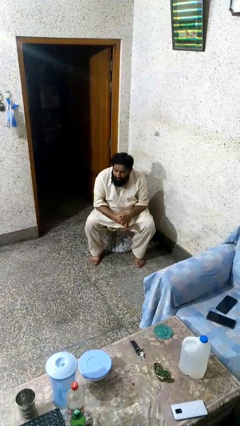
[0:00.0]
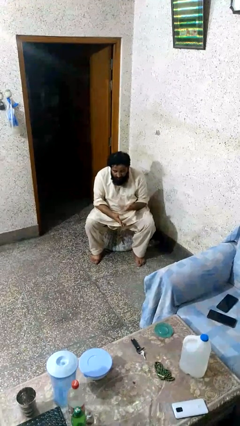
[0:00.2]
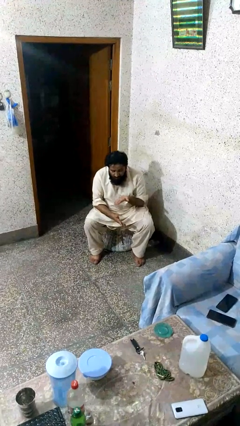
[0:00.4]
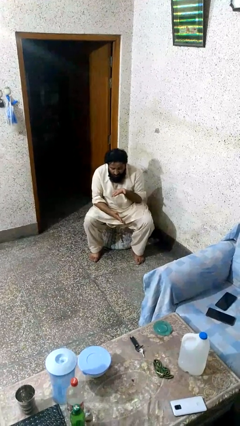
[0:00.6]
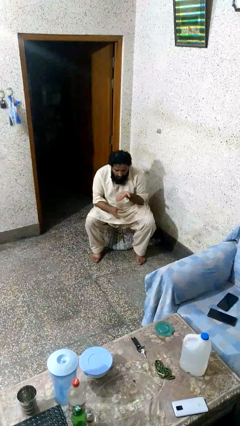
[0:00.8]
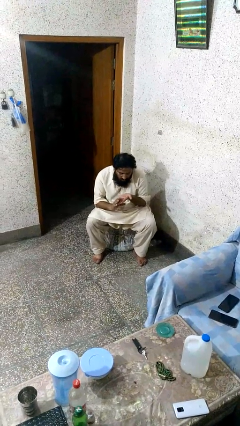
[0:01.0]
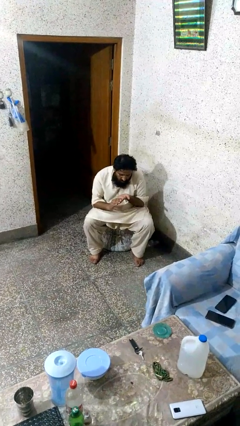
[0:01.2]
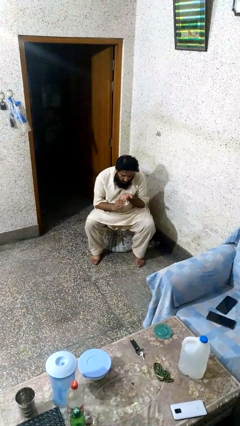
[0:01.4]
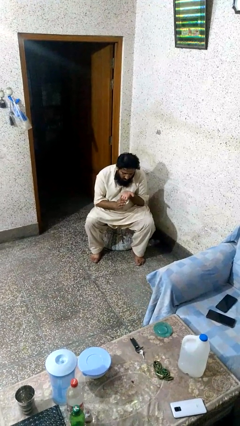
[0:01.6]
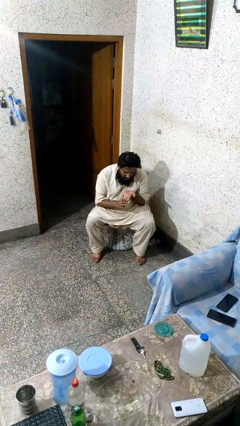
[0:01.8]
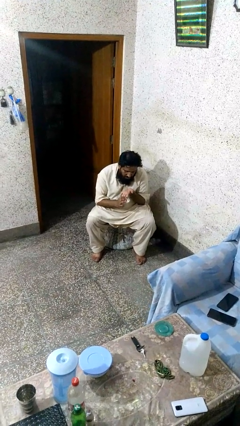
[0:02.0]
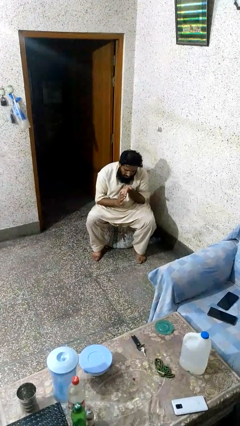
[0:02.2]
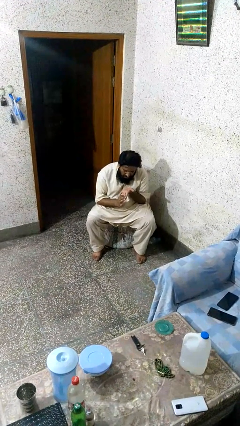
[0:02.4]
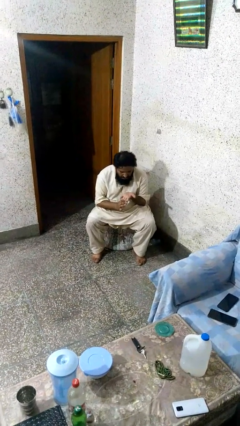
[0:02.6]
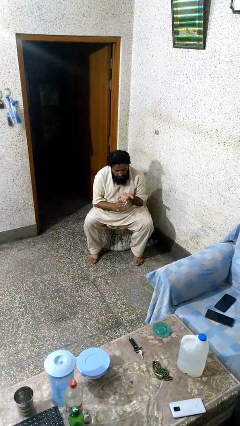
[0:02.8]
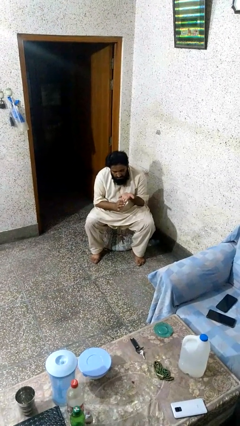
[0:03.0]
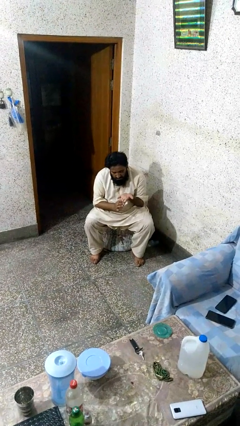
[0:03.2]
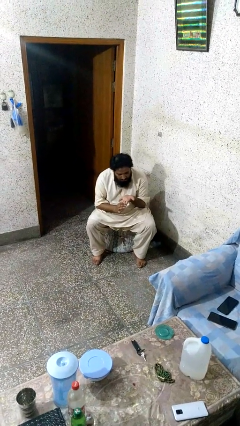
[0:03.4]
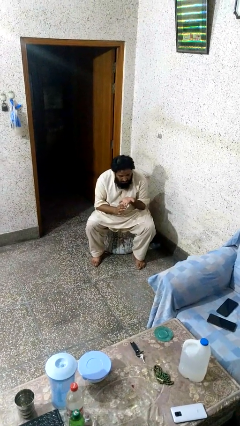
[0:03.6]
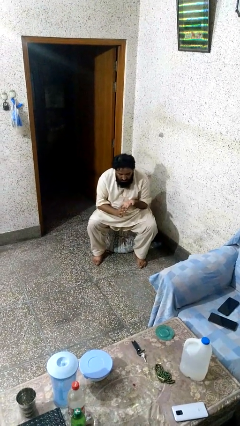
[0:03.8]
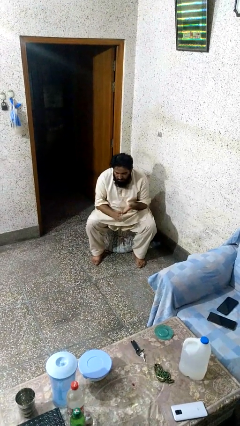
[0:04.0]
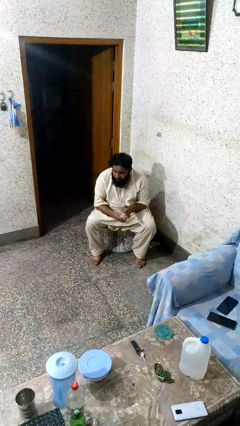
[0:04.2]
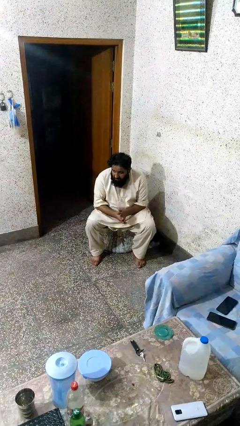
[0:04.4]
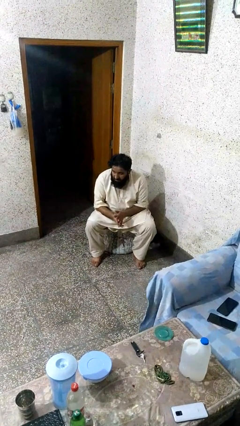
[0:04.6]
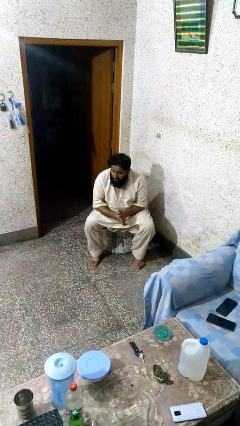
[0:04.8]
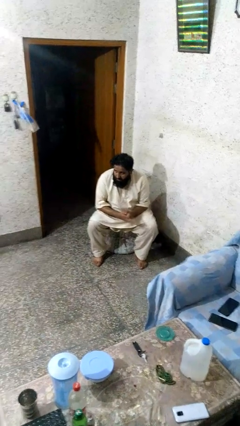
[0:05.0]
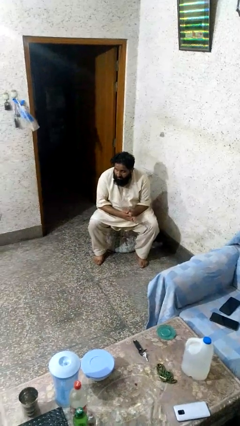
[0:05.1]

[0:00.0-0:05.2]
person looks at hands in lap

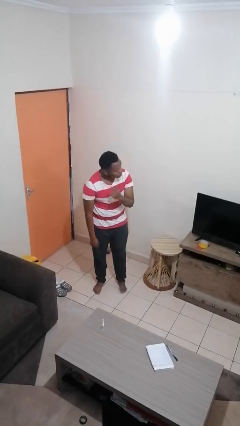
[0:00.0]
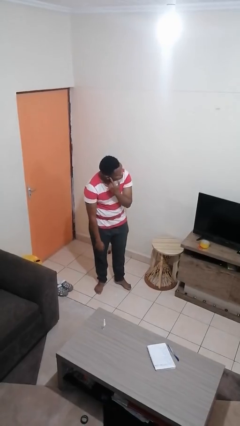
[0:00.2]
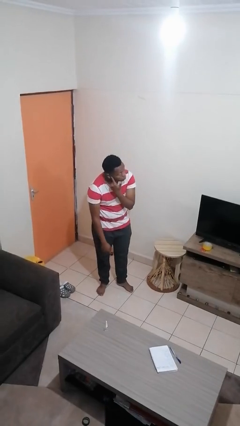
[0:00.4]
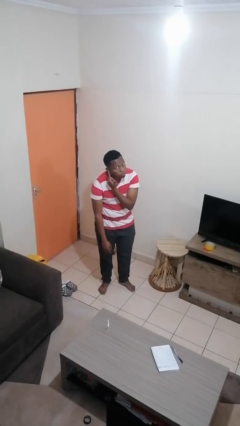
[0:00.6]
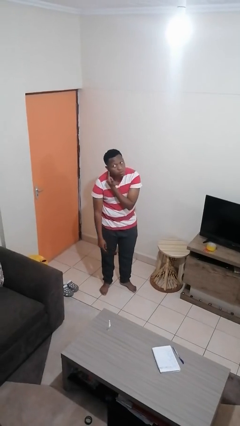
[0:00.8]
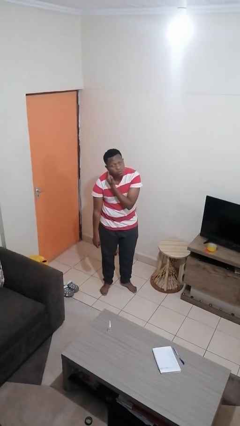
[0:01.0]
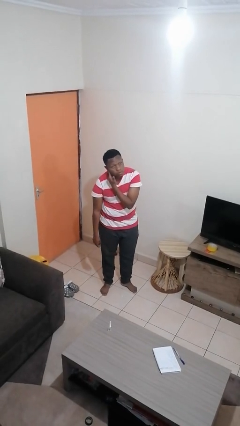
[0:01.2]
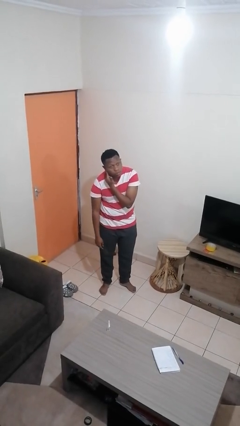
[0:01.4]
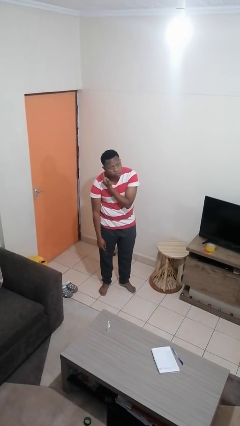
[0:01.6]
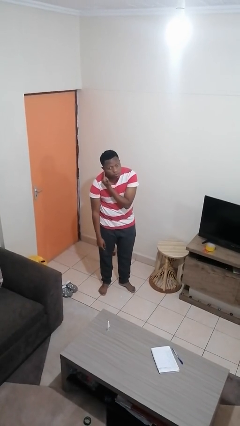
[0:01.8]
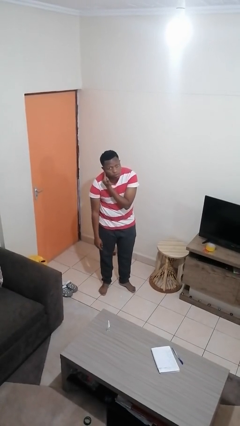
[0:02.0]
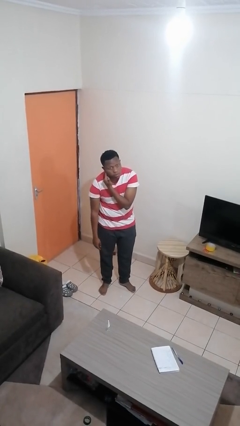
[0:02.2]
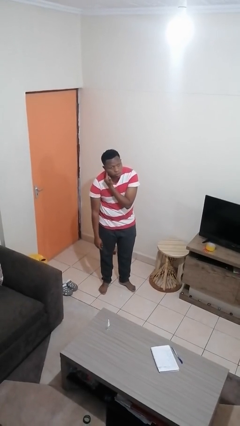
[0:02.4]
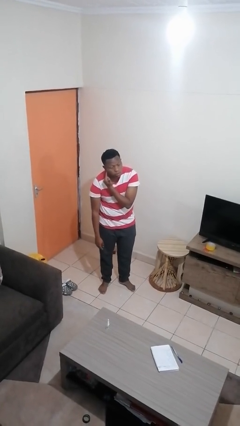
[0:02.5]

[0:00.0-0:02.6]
person gestures listen closely

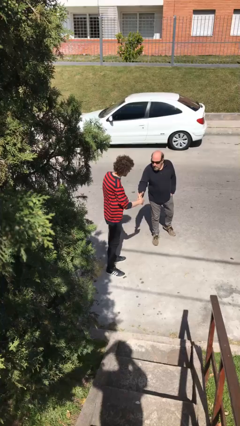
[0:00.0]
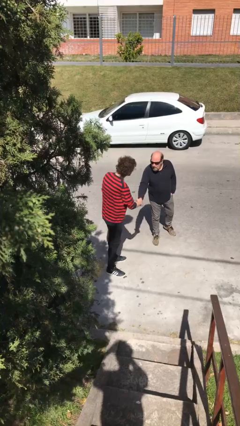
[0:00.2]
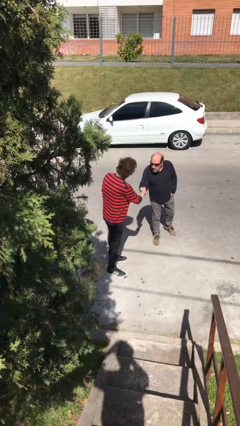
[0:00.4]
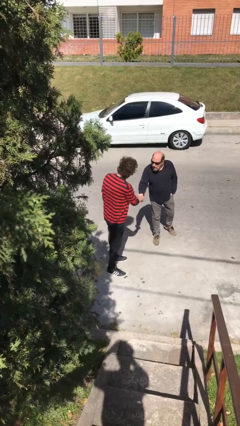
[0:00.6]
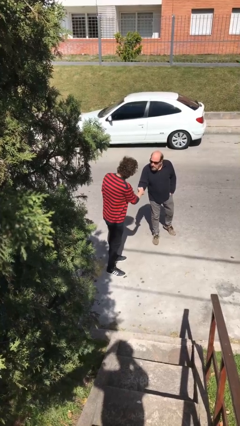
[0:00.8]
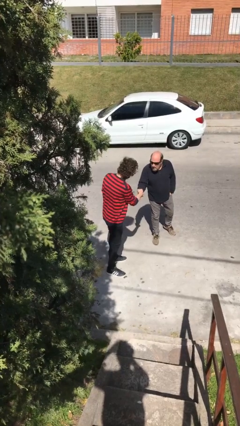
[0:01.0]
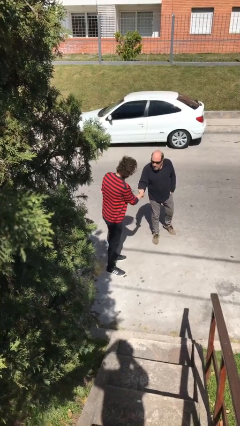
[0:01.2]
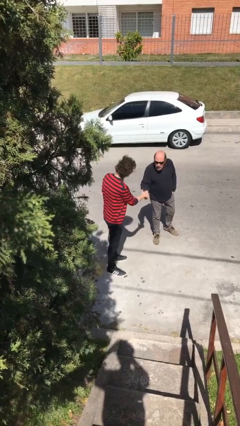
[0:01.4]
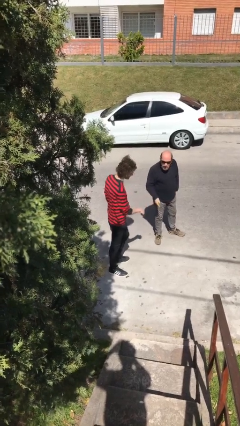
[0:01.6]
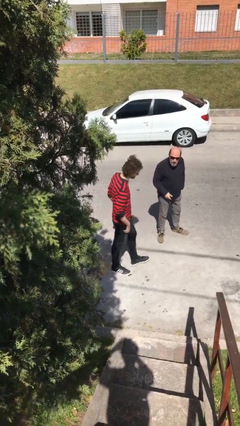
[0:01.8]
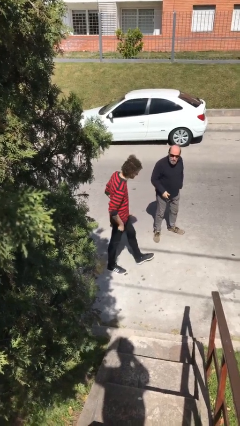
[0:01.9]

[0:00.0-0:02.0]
person shakes hand

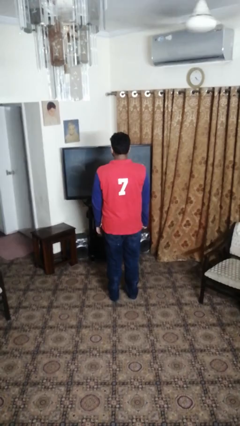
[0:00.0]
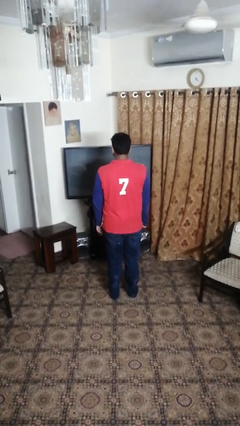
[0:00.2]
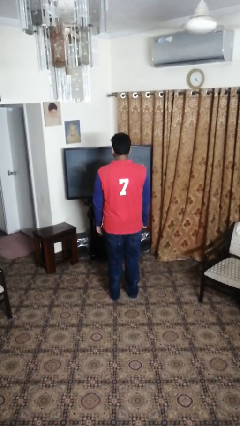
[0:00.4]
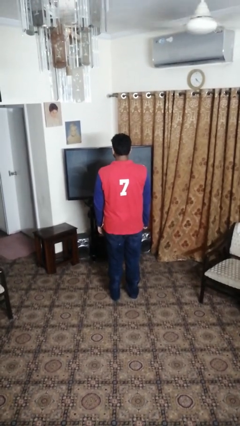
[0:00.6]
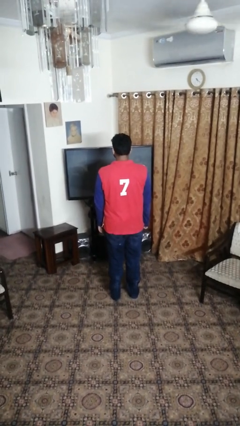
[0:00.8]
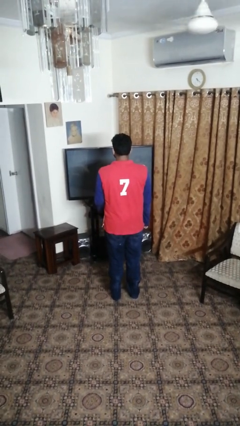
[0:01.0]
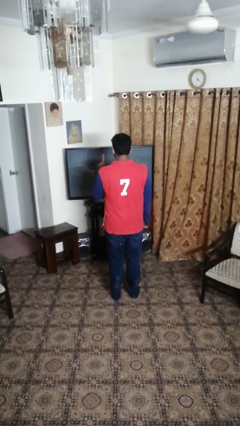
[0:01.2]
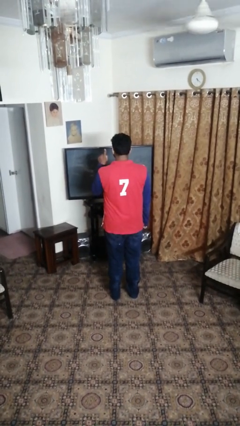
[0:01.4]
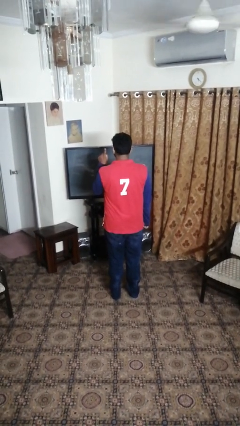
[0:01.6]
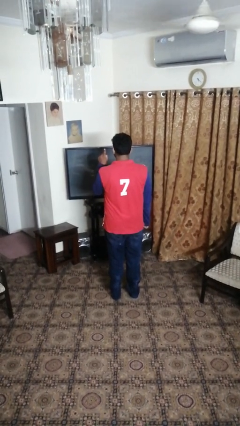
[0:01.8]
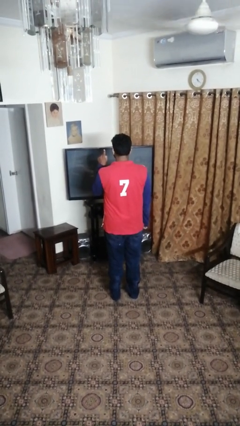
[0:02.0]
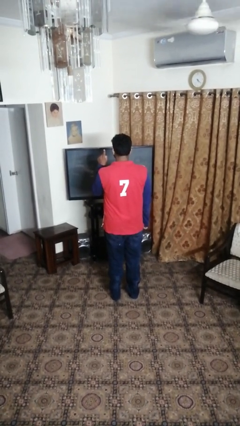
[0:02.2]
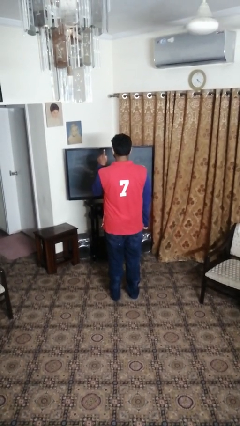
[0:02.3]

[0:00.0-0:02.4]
person gestures number one

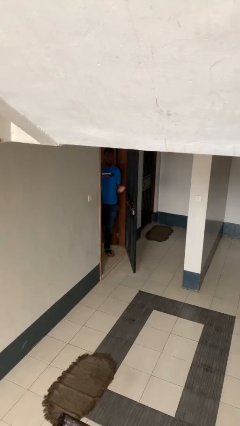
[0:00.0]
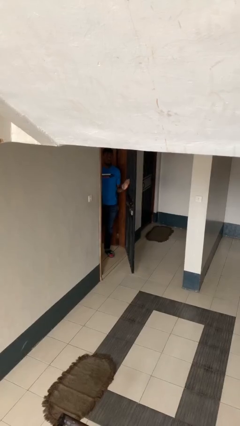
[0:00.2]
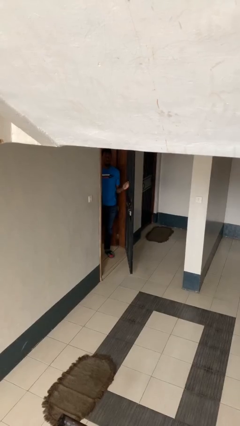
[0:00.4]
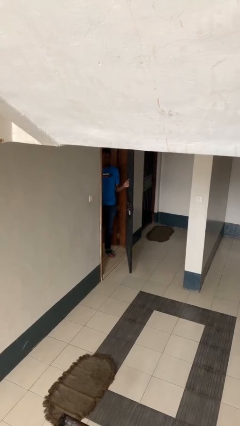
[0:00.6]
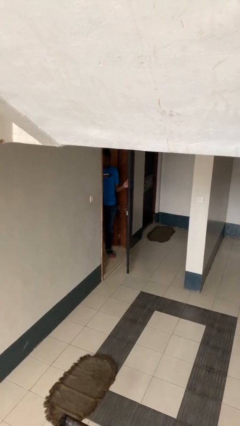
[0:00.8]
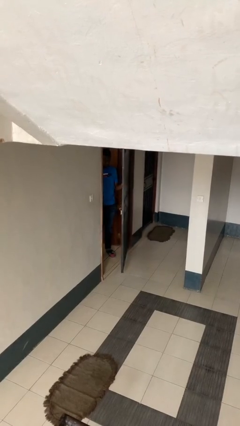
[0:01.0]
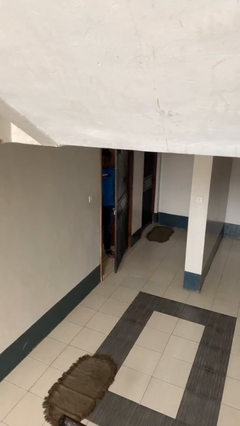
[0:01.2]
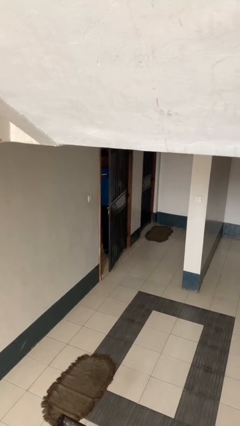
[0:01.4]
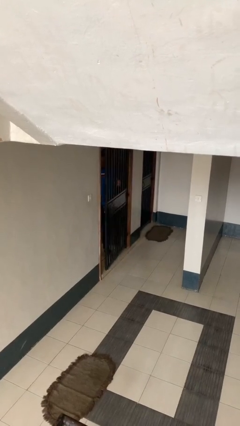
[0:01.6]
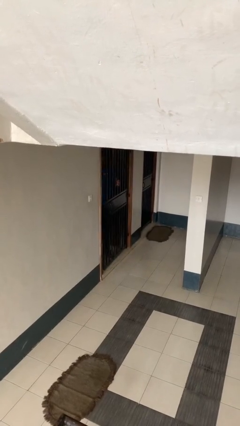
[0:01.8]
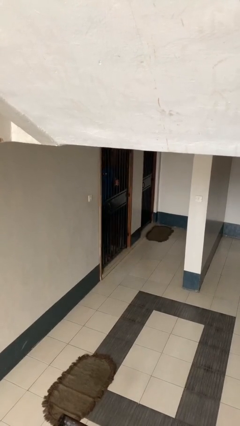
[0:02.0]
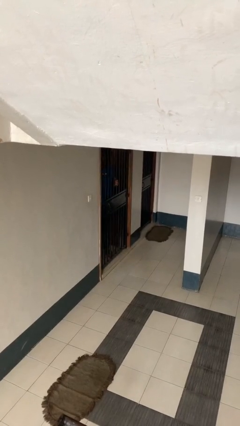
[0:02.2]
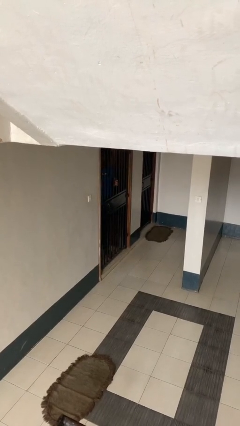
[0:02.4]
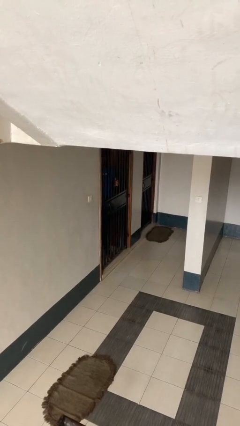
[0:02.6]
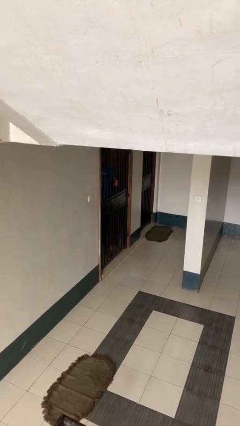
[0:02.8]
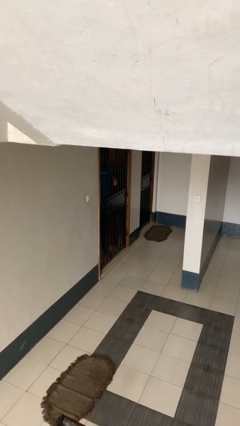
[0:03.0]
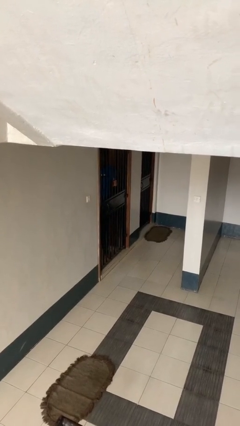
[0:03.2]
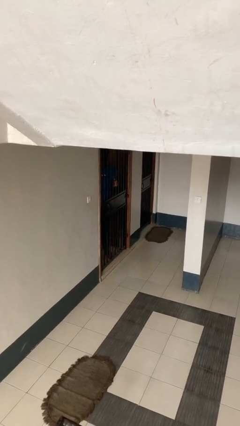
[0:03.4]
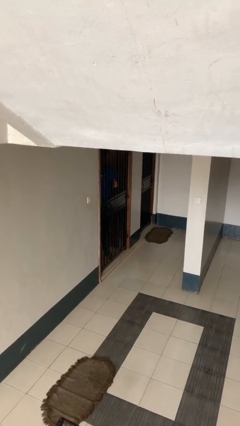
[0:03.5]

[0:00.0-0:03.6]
person closes facility door

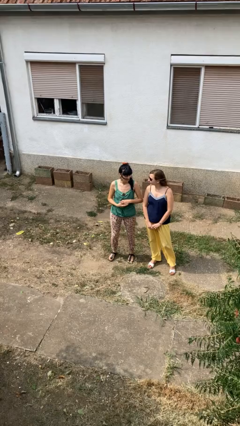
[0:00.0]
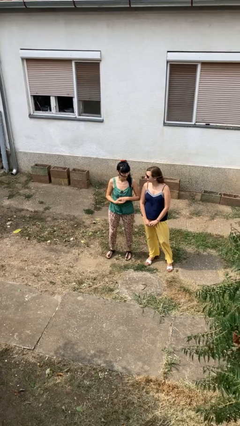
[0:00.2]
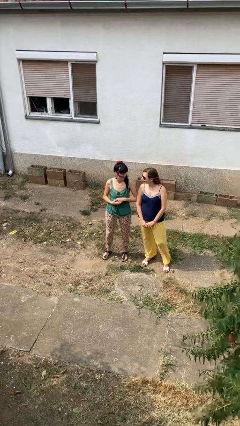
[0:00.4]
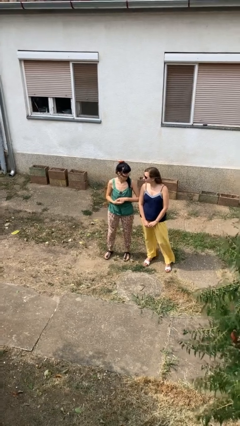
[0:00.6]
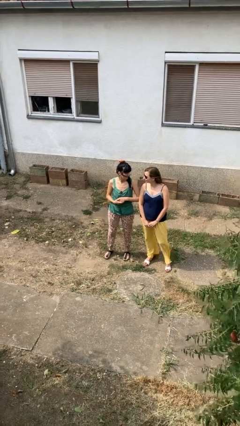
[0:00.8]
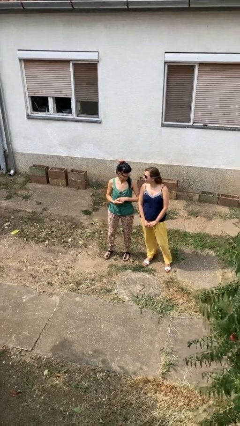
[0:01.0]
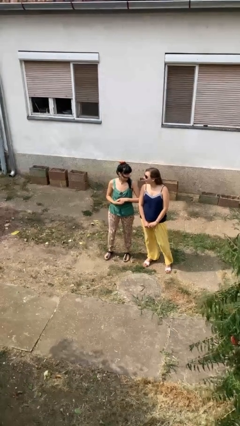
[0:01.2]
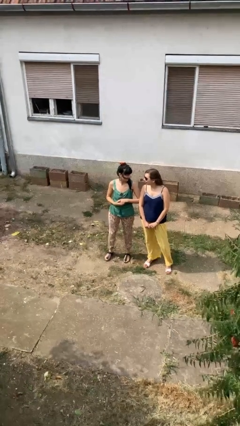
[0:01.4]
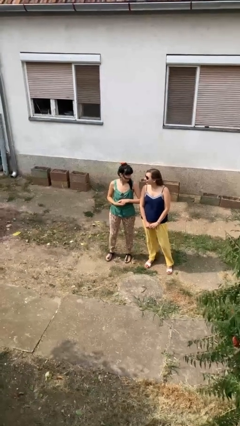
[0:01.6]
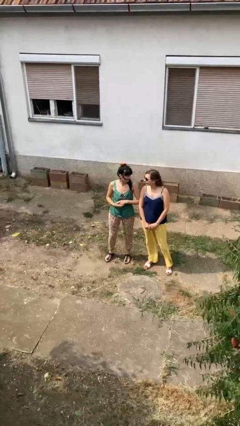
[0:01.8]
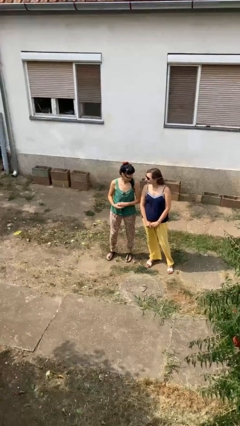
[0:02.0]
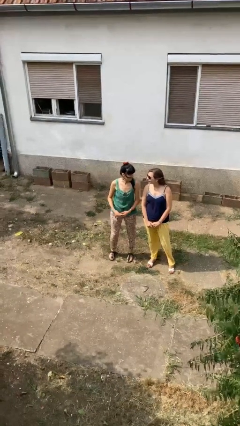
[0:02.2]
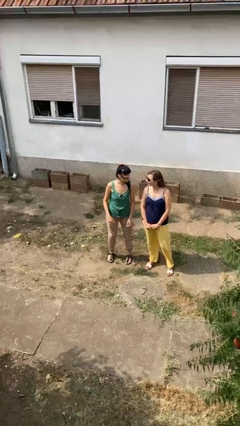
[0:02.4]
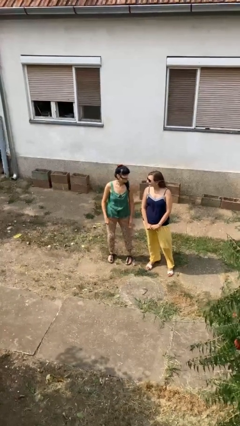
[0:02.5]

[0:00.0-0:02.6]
person nudges person with elbow
